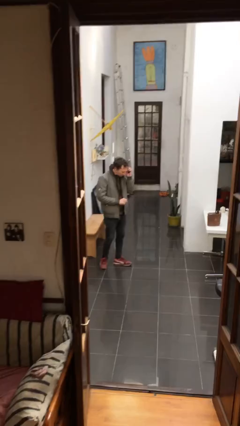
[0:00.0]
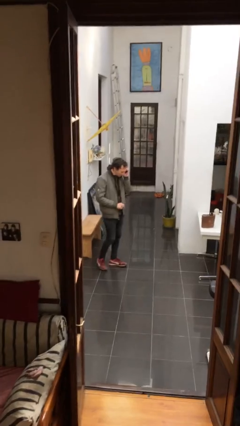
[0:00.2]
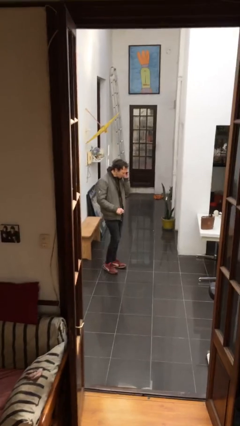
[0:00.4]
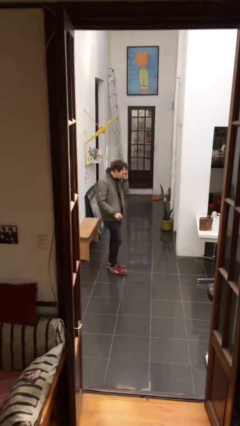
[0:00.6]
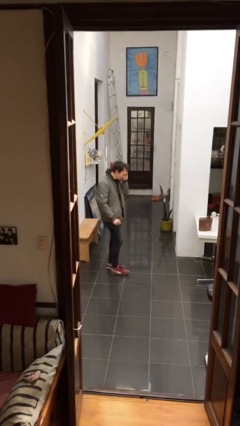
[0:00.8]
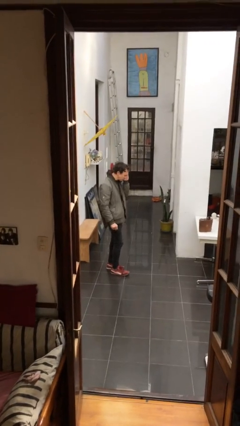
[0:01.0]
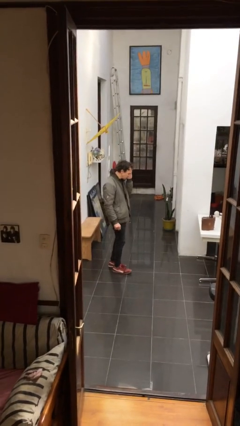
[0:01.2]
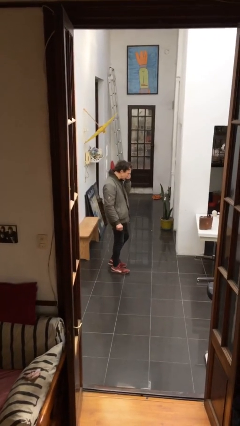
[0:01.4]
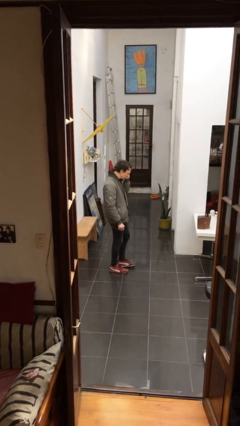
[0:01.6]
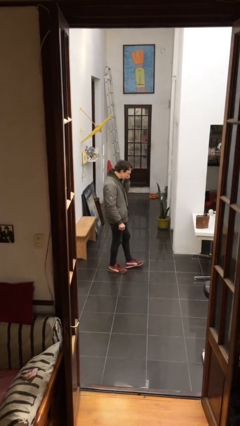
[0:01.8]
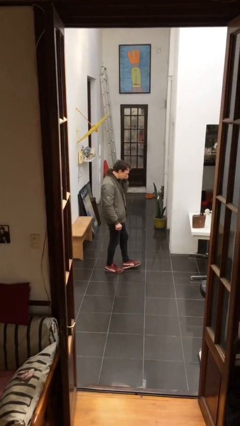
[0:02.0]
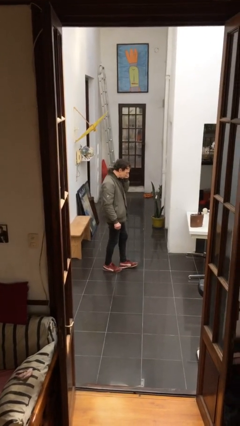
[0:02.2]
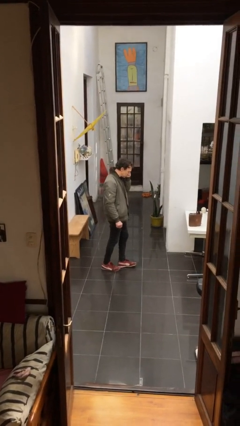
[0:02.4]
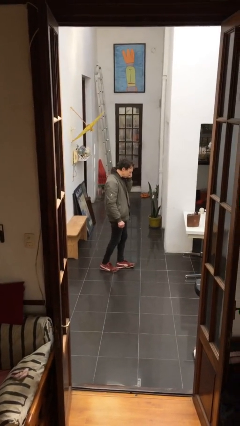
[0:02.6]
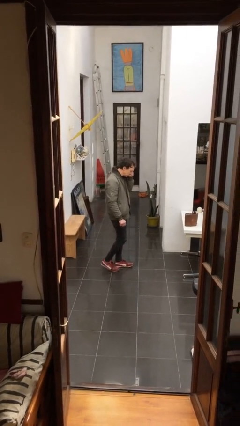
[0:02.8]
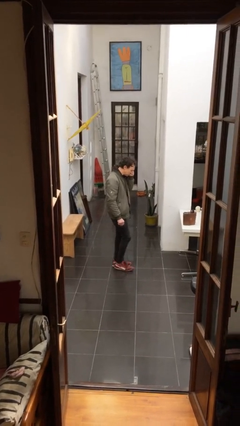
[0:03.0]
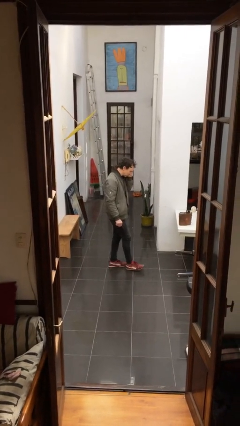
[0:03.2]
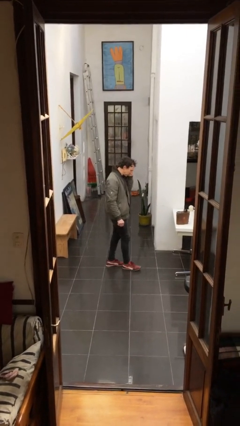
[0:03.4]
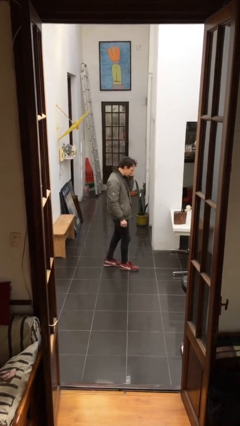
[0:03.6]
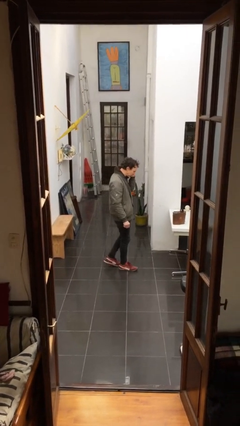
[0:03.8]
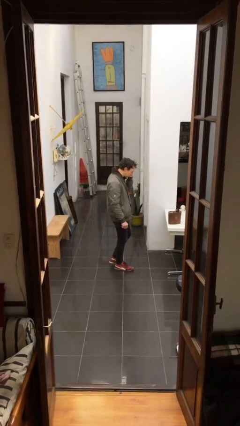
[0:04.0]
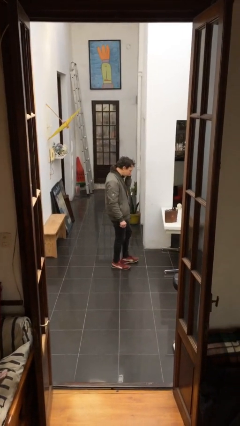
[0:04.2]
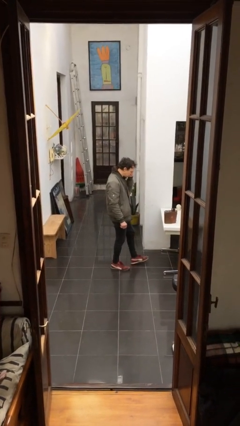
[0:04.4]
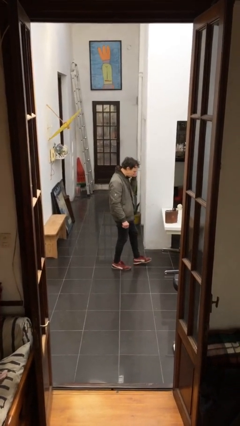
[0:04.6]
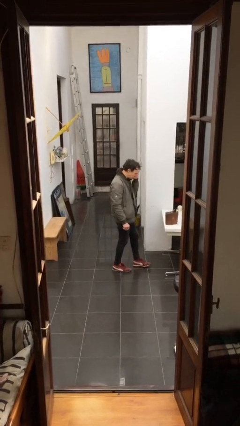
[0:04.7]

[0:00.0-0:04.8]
person talks on phone

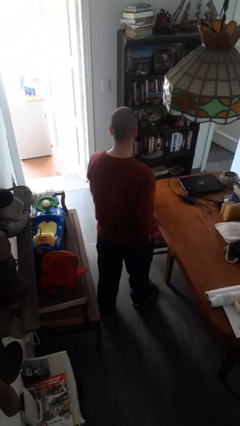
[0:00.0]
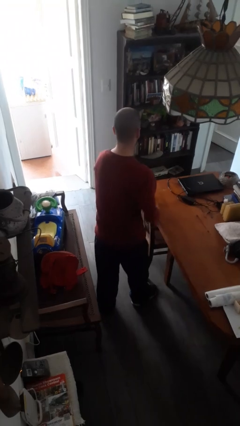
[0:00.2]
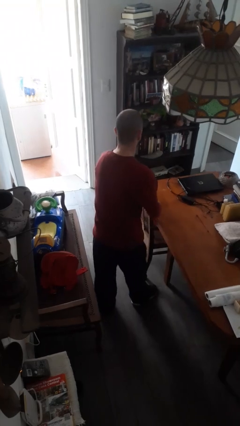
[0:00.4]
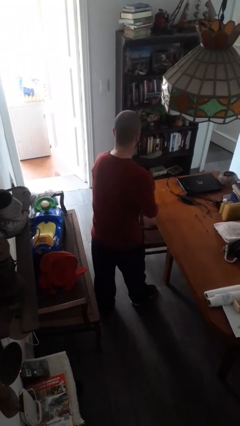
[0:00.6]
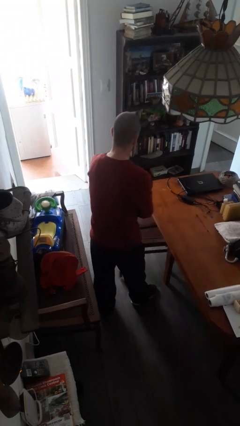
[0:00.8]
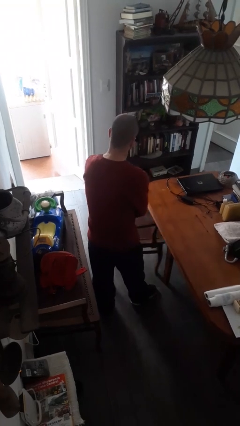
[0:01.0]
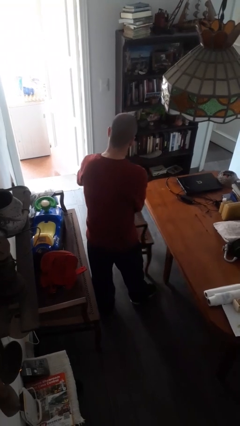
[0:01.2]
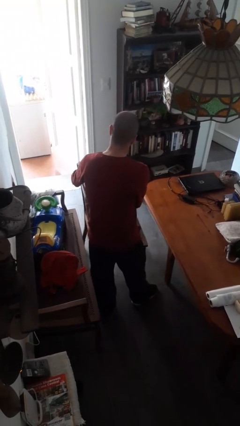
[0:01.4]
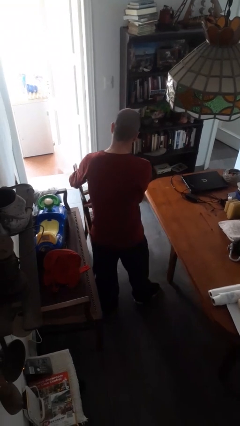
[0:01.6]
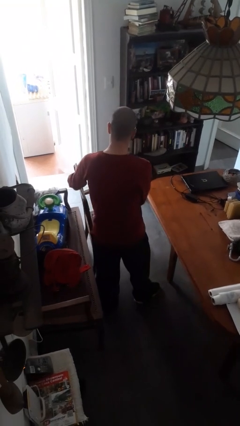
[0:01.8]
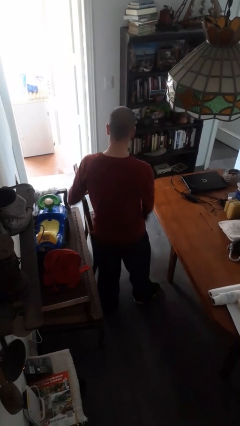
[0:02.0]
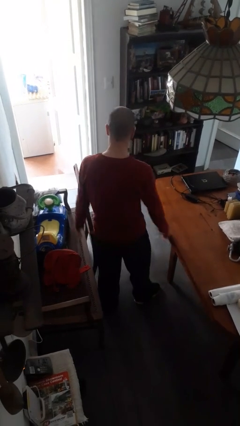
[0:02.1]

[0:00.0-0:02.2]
person pulls out chair

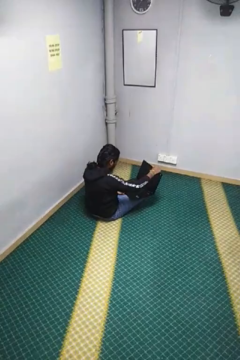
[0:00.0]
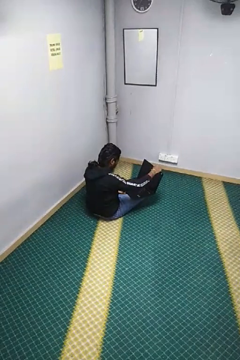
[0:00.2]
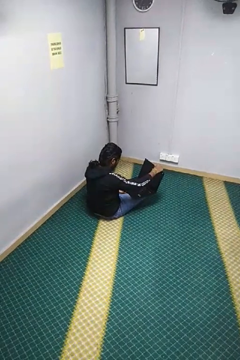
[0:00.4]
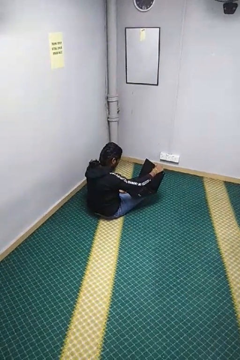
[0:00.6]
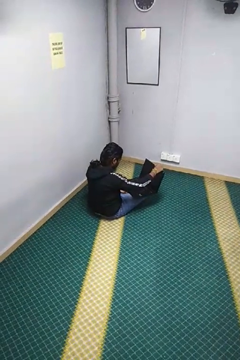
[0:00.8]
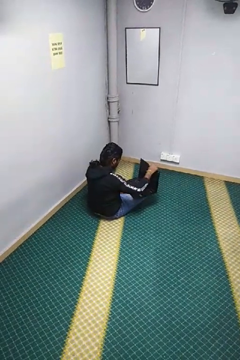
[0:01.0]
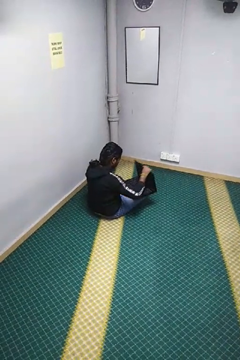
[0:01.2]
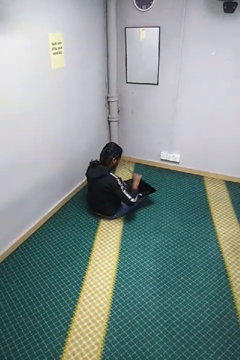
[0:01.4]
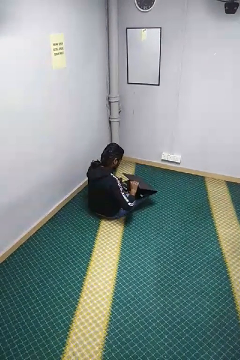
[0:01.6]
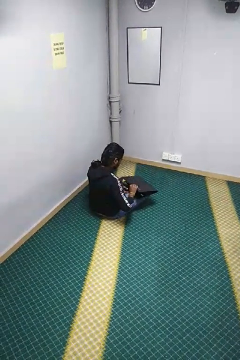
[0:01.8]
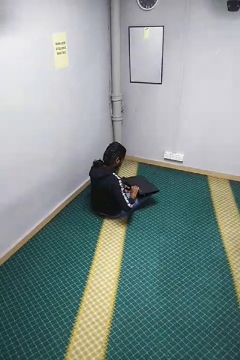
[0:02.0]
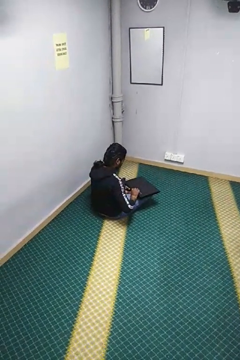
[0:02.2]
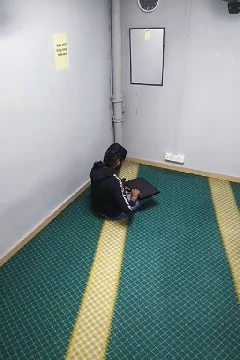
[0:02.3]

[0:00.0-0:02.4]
person closes laptop

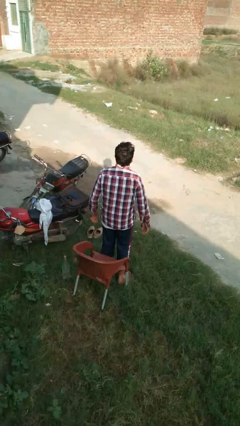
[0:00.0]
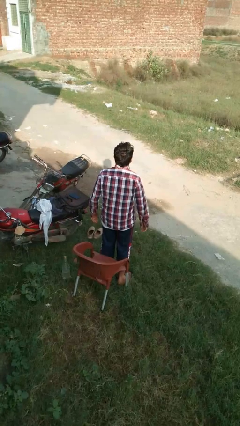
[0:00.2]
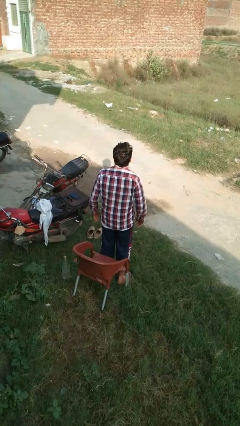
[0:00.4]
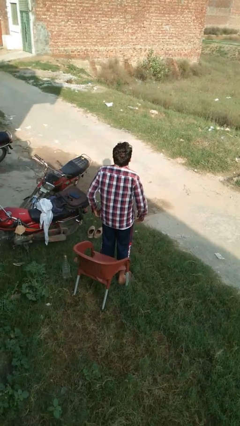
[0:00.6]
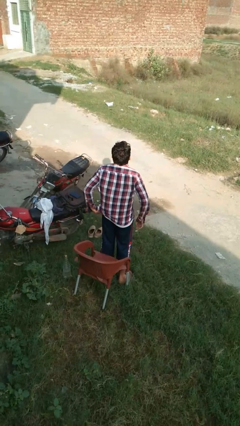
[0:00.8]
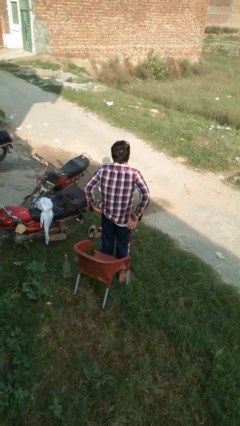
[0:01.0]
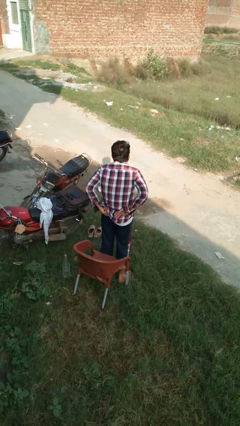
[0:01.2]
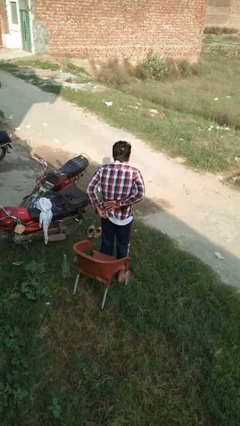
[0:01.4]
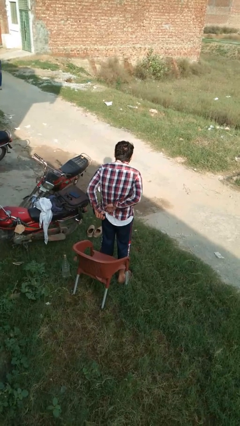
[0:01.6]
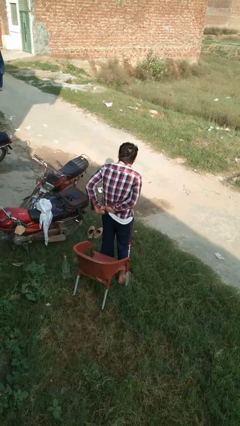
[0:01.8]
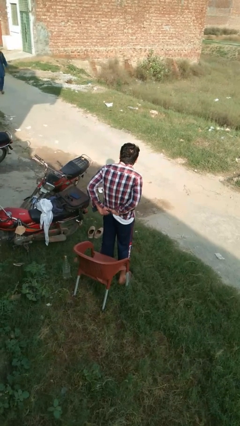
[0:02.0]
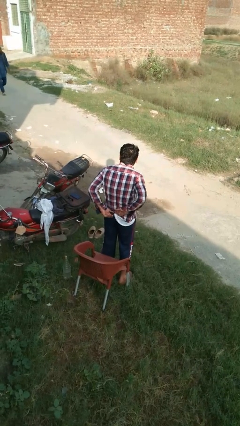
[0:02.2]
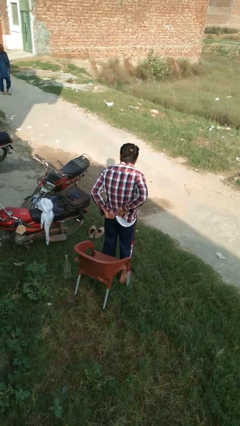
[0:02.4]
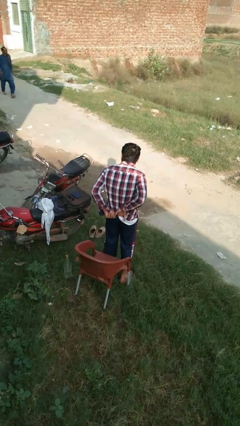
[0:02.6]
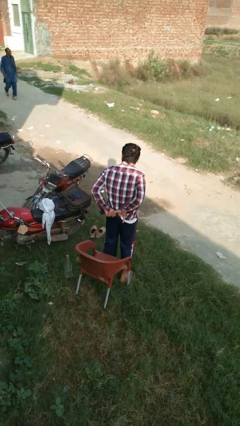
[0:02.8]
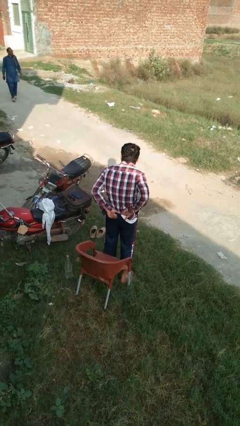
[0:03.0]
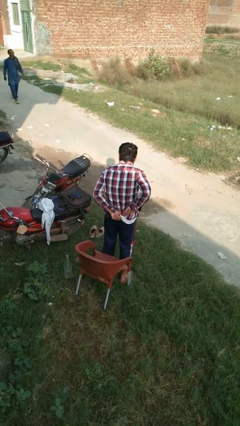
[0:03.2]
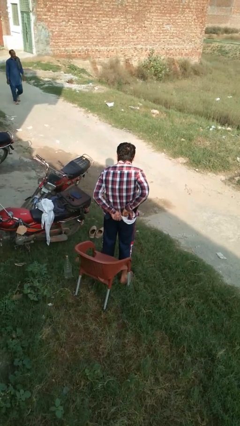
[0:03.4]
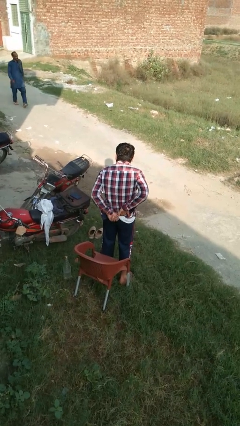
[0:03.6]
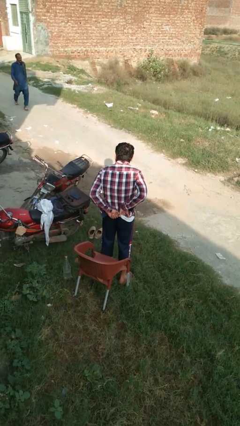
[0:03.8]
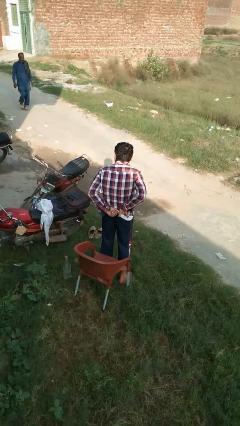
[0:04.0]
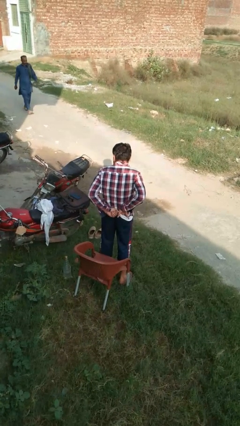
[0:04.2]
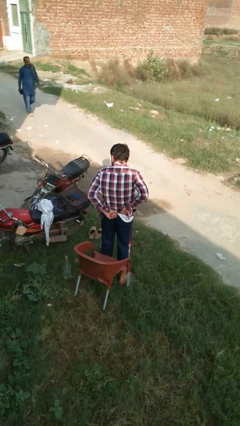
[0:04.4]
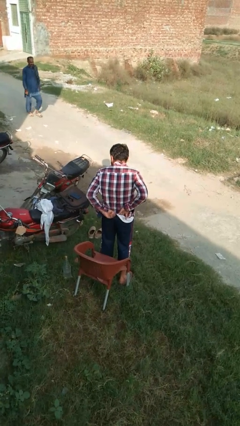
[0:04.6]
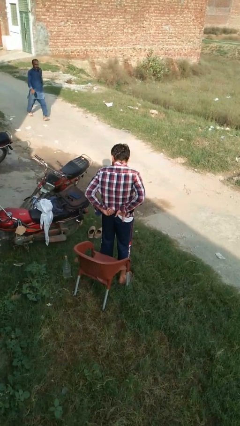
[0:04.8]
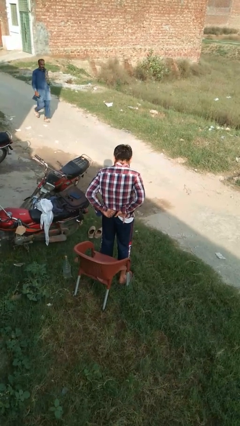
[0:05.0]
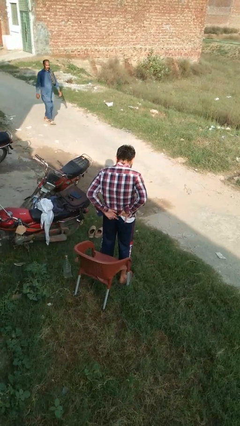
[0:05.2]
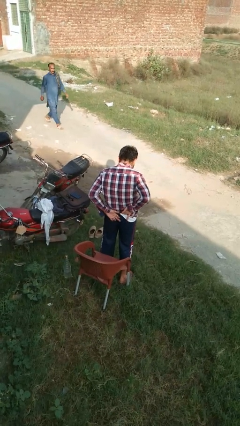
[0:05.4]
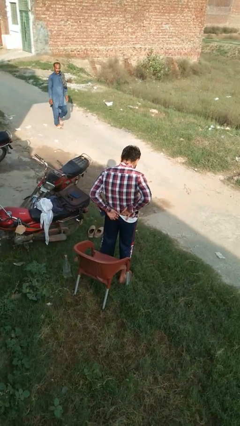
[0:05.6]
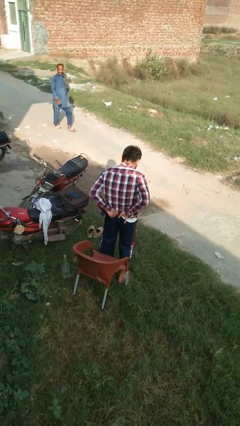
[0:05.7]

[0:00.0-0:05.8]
person tucks in shirt

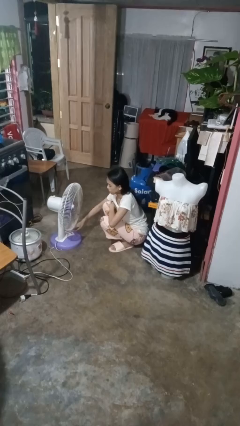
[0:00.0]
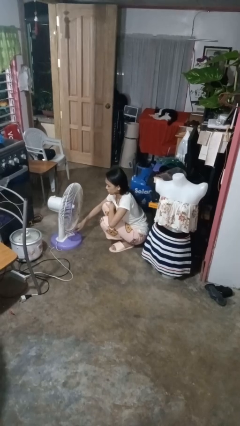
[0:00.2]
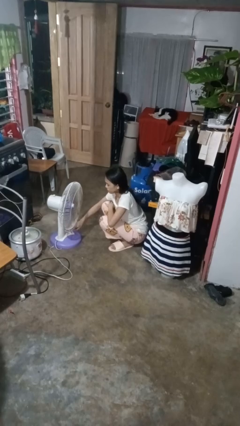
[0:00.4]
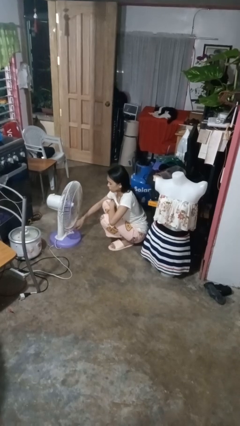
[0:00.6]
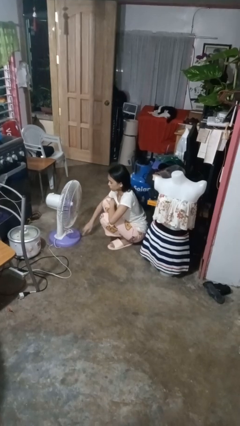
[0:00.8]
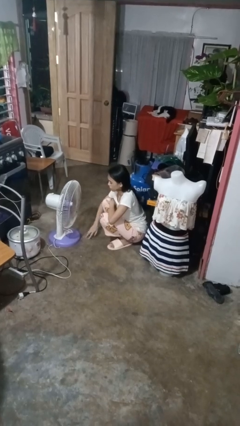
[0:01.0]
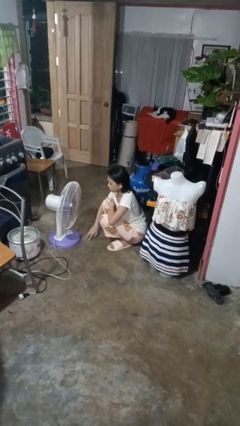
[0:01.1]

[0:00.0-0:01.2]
person turns on fan

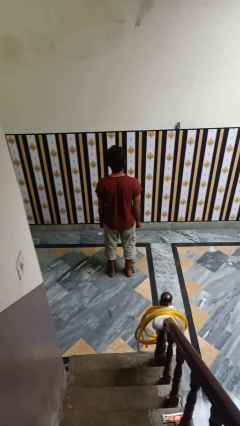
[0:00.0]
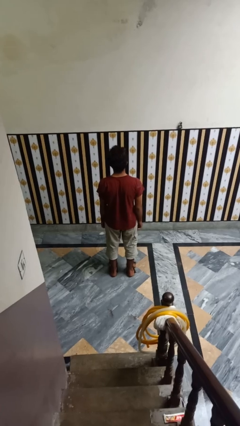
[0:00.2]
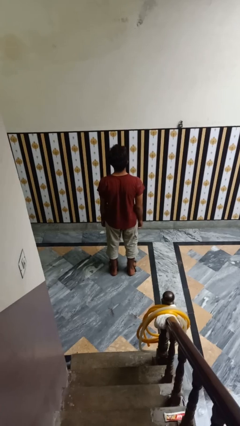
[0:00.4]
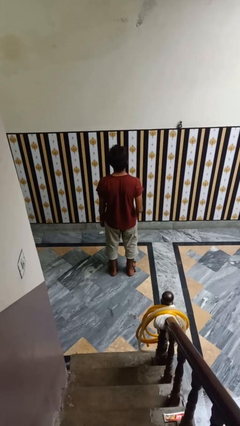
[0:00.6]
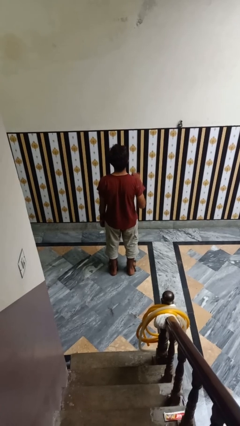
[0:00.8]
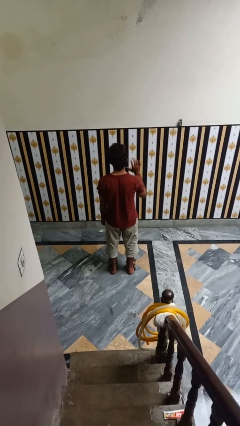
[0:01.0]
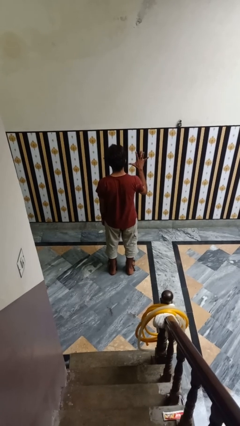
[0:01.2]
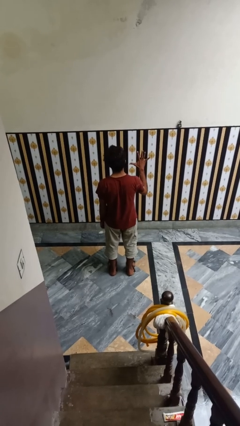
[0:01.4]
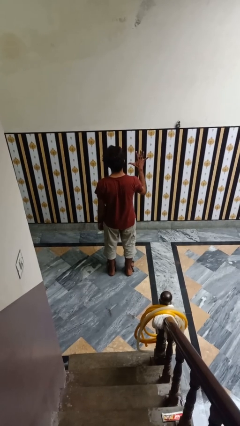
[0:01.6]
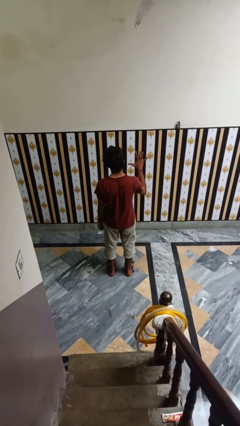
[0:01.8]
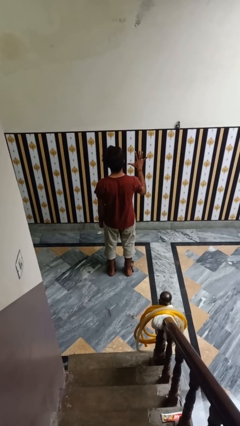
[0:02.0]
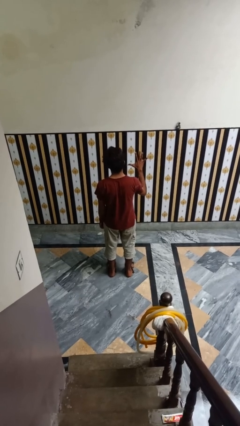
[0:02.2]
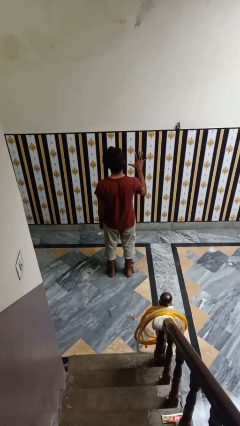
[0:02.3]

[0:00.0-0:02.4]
person gestures number five
